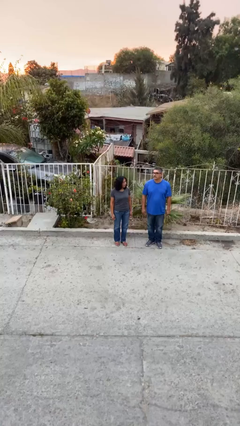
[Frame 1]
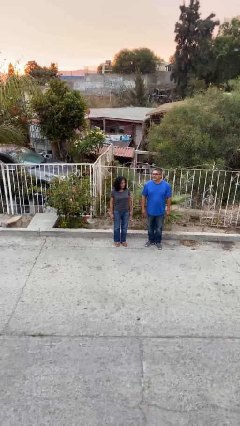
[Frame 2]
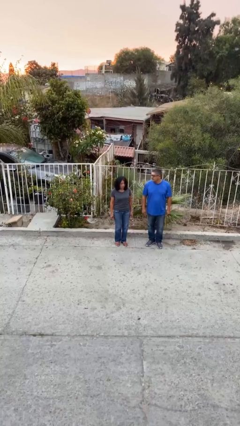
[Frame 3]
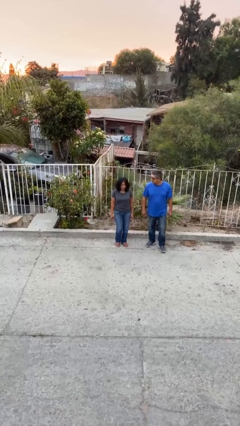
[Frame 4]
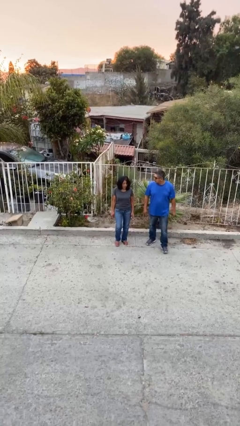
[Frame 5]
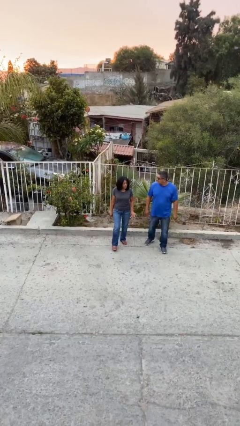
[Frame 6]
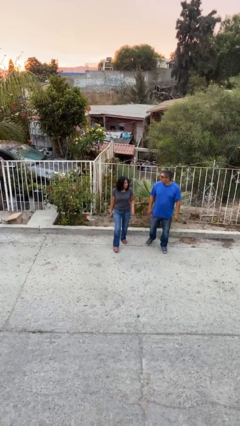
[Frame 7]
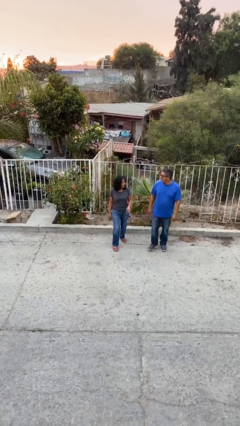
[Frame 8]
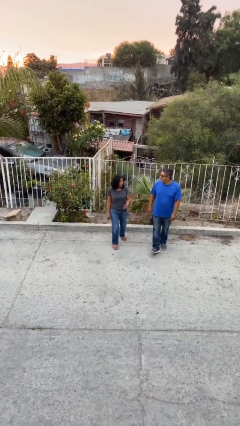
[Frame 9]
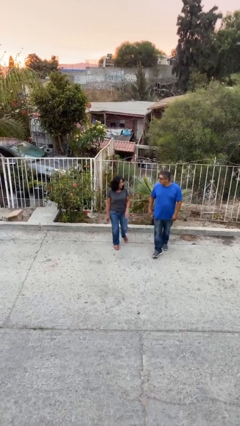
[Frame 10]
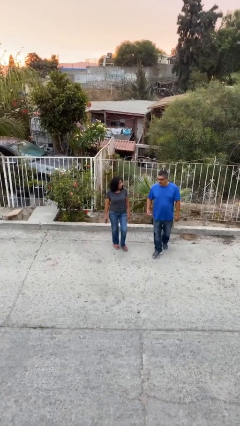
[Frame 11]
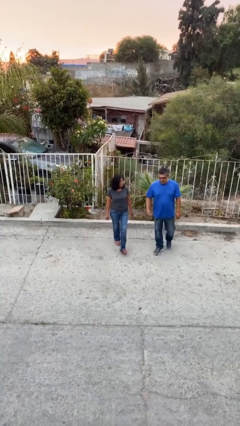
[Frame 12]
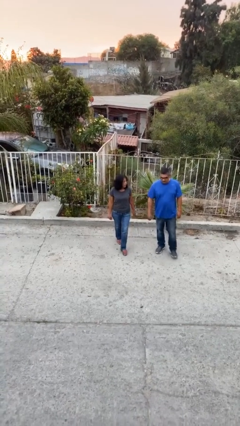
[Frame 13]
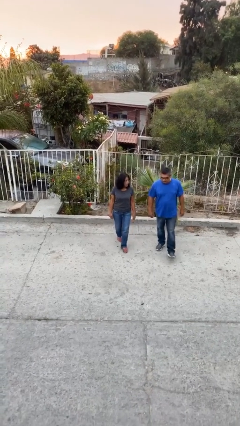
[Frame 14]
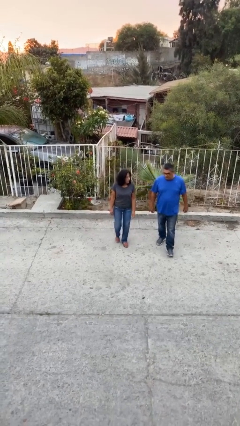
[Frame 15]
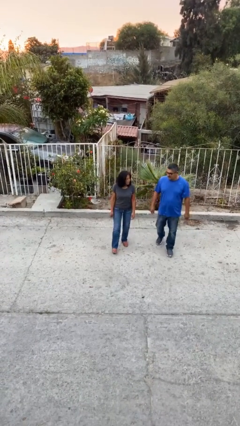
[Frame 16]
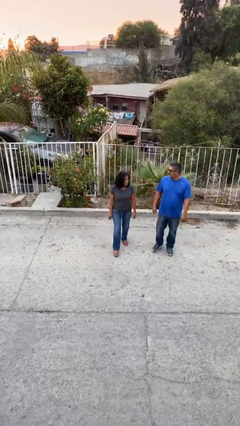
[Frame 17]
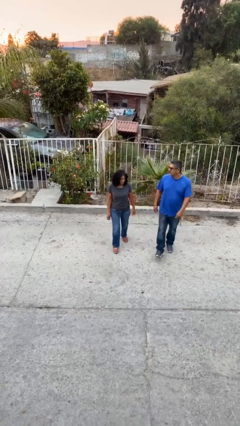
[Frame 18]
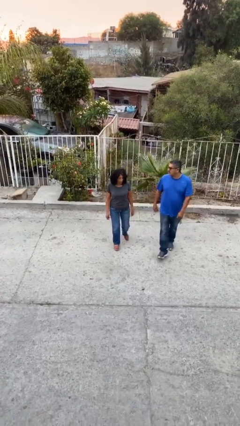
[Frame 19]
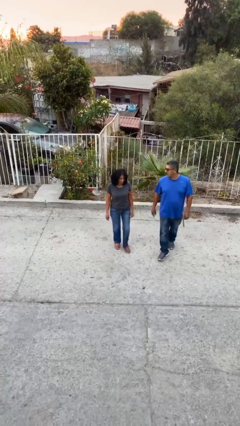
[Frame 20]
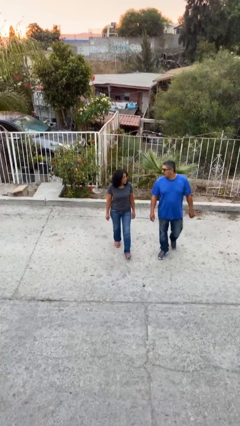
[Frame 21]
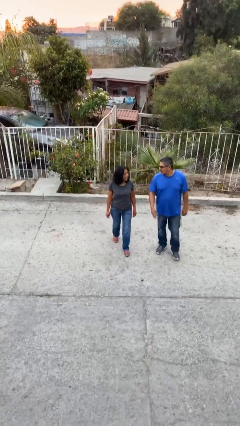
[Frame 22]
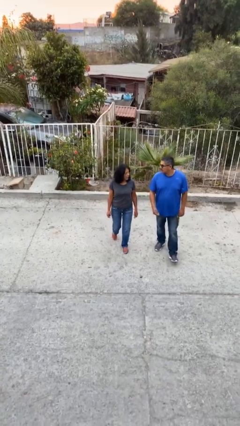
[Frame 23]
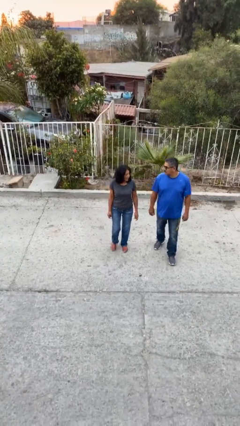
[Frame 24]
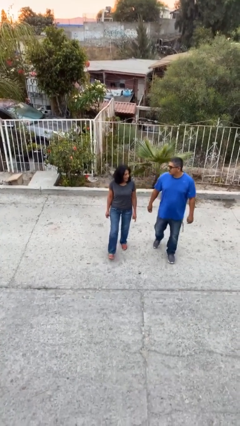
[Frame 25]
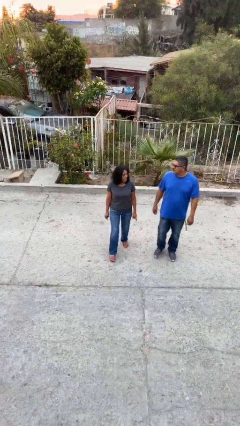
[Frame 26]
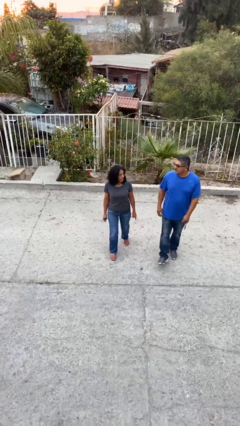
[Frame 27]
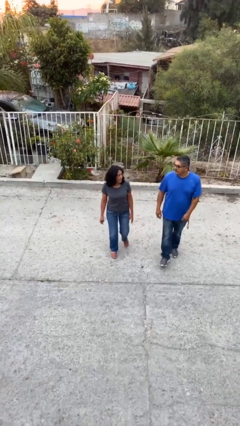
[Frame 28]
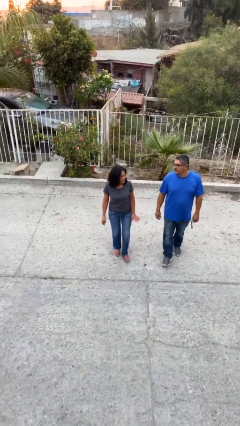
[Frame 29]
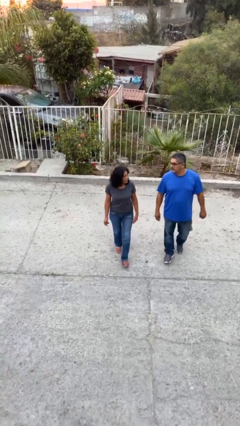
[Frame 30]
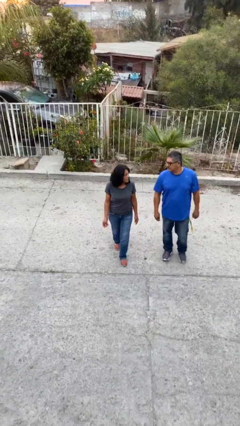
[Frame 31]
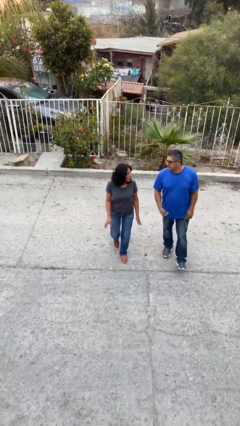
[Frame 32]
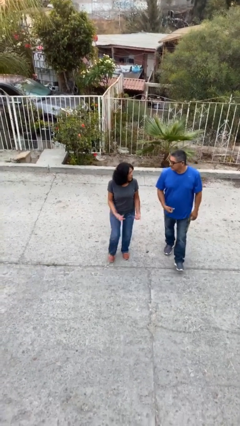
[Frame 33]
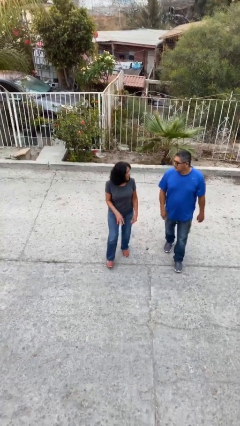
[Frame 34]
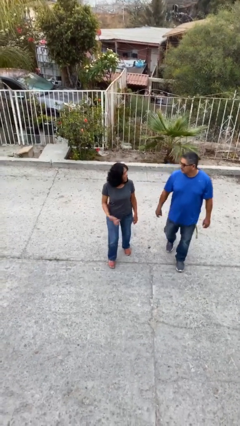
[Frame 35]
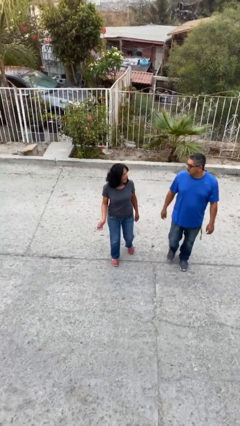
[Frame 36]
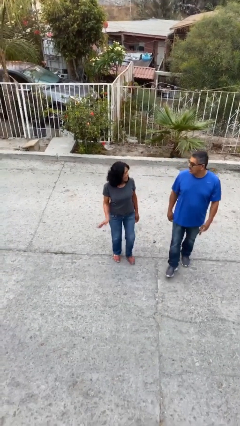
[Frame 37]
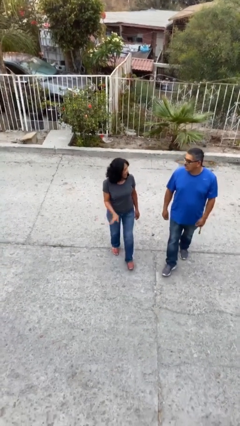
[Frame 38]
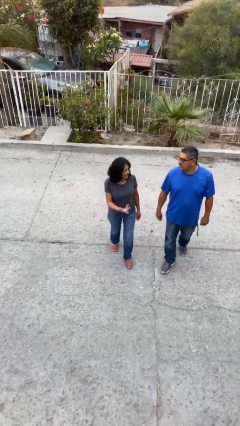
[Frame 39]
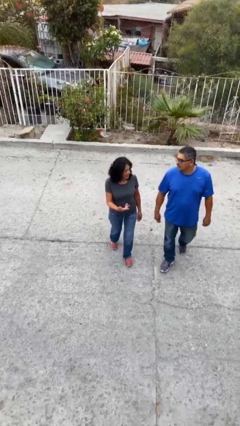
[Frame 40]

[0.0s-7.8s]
person talks to person

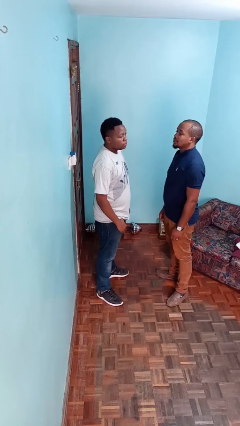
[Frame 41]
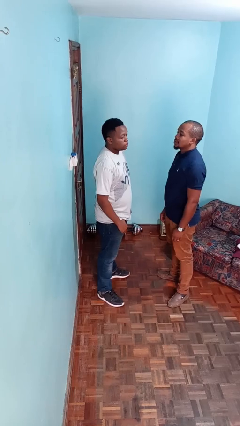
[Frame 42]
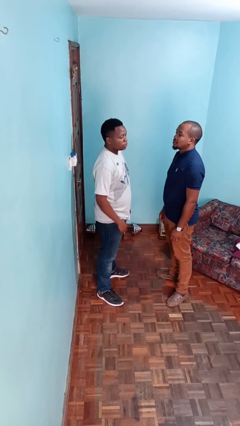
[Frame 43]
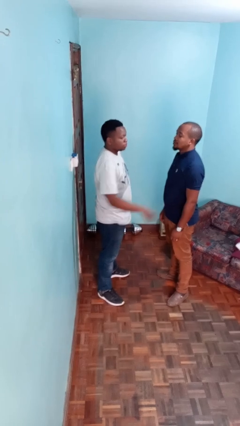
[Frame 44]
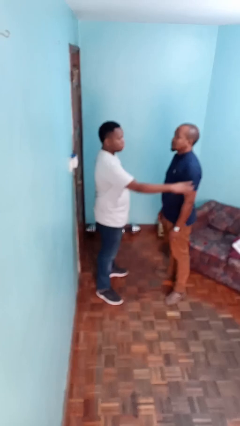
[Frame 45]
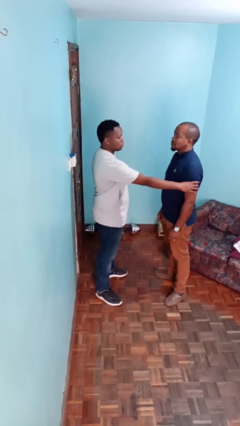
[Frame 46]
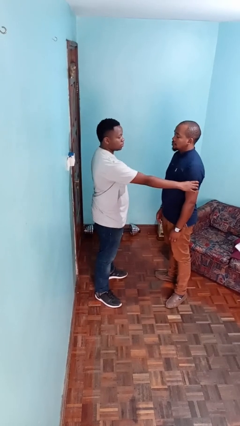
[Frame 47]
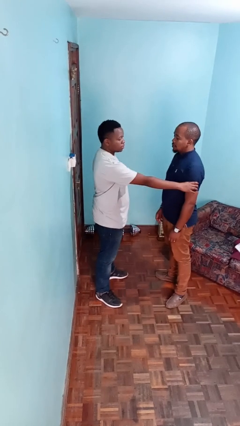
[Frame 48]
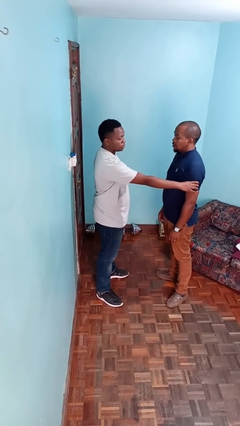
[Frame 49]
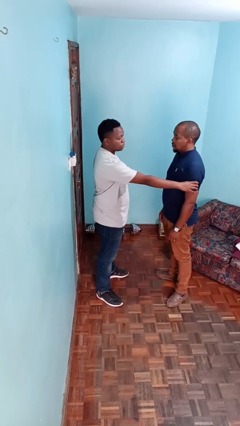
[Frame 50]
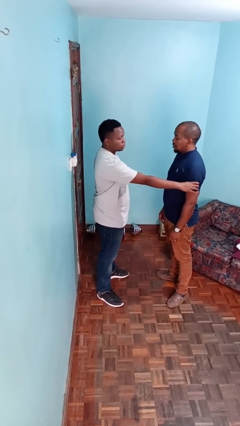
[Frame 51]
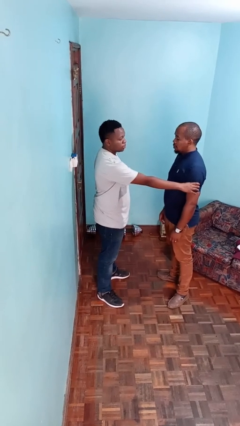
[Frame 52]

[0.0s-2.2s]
person grabs person by bicep

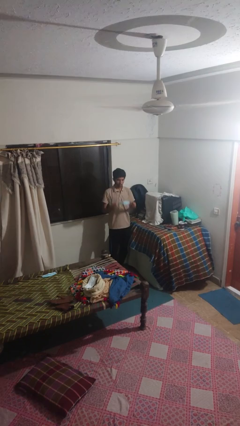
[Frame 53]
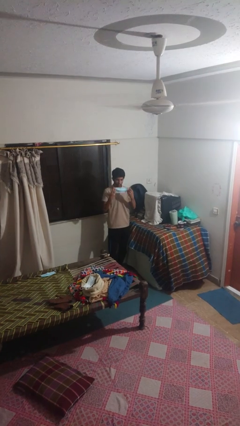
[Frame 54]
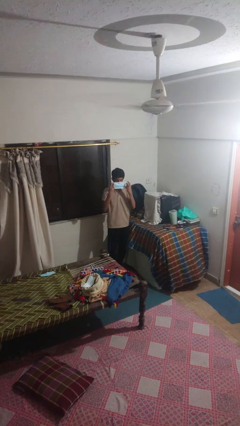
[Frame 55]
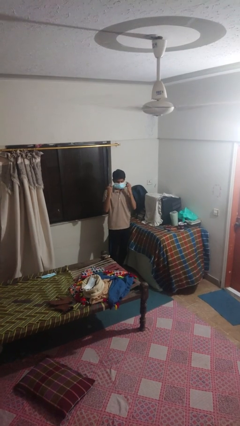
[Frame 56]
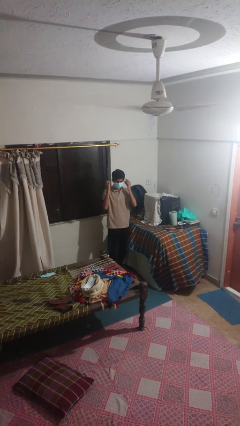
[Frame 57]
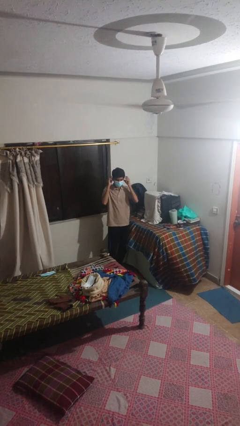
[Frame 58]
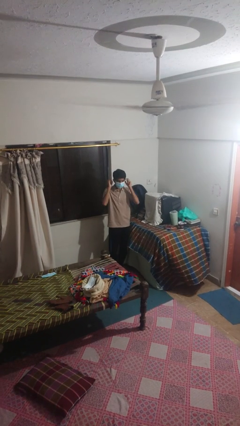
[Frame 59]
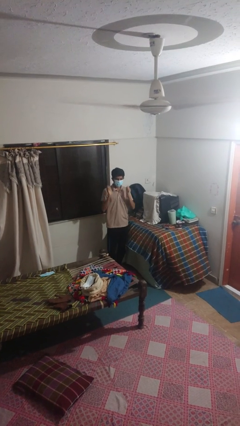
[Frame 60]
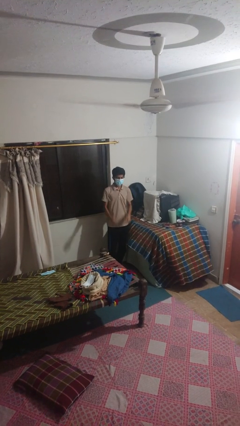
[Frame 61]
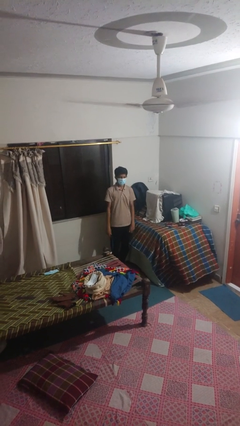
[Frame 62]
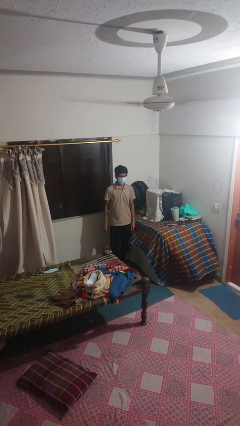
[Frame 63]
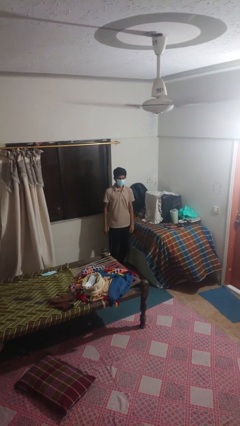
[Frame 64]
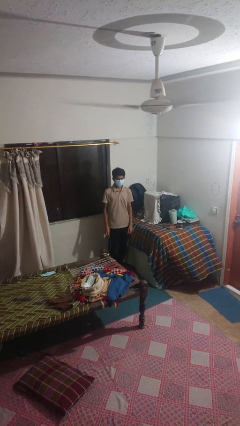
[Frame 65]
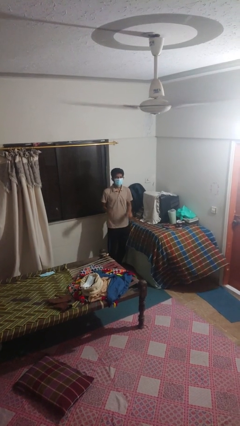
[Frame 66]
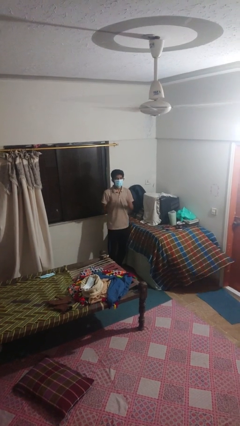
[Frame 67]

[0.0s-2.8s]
person puts on facemask

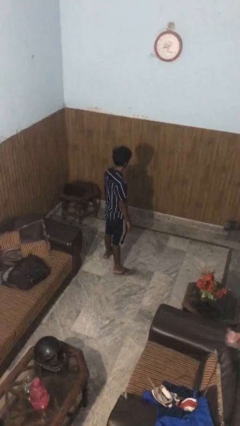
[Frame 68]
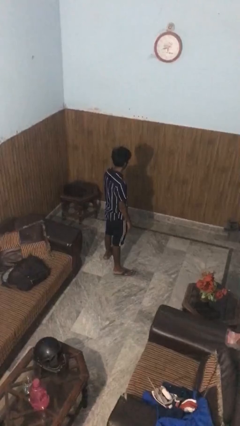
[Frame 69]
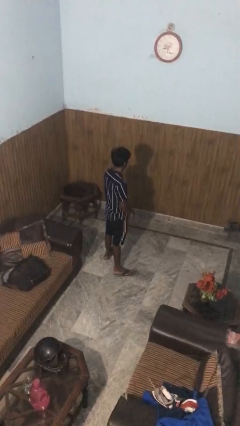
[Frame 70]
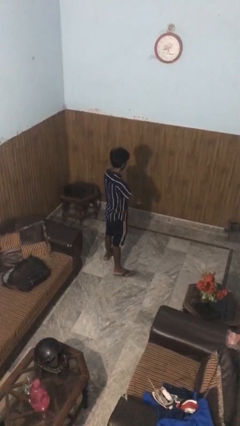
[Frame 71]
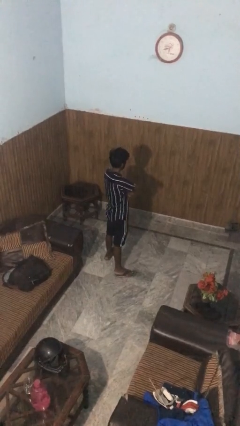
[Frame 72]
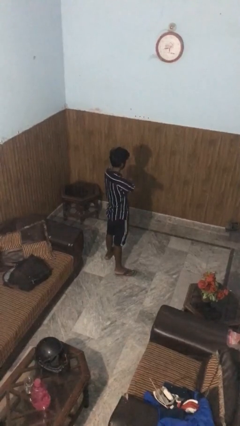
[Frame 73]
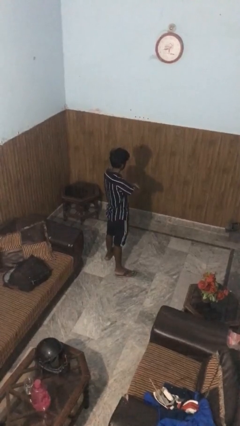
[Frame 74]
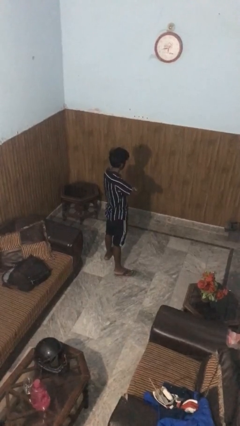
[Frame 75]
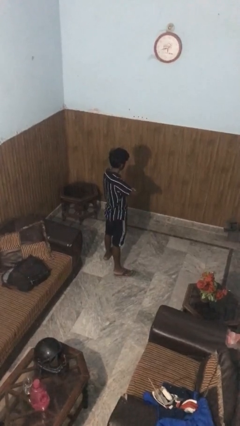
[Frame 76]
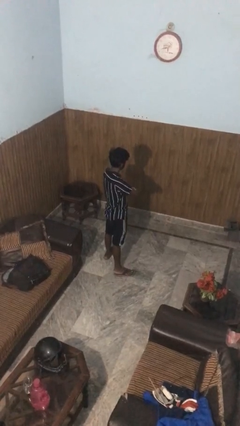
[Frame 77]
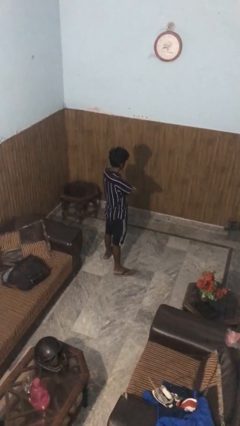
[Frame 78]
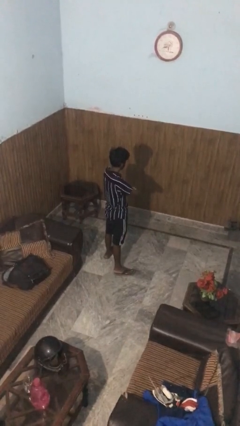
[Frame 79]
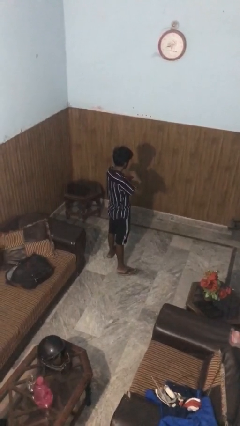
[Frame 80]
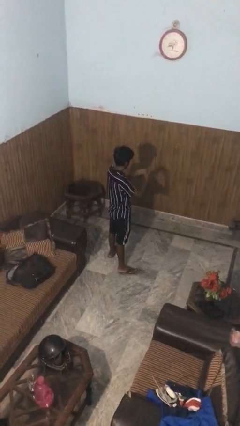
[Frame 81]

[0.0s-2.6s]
person crosses arms

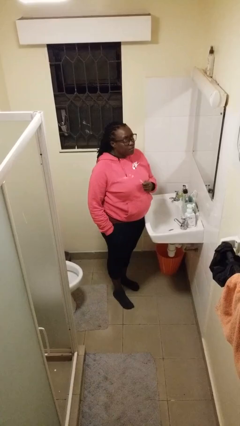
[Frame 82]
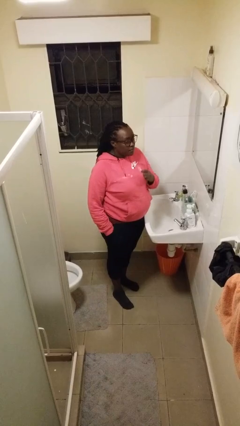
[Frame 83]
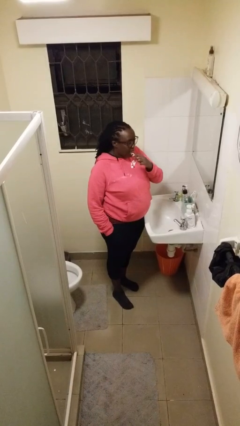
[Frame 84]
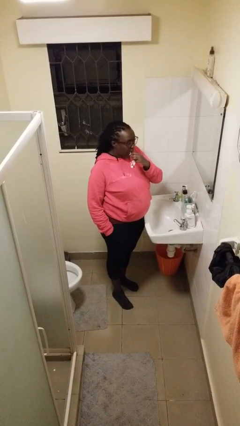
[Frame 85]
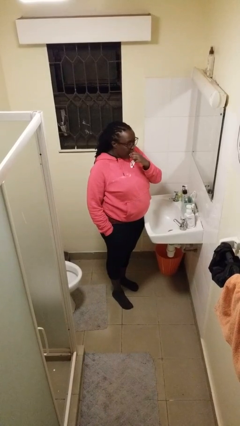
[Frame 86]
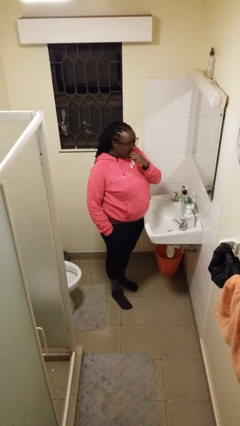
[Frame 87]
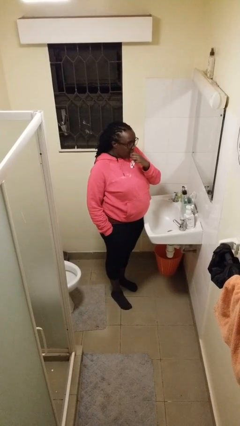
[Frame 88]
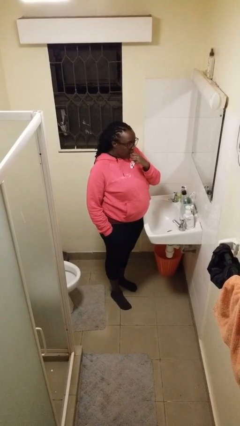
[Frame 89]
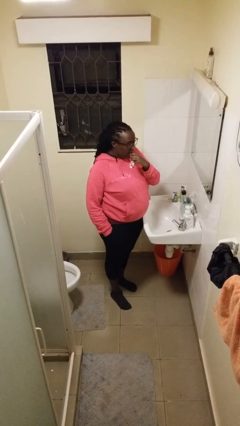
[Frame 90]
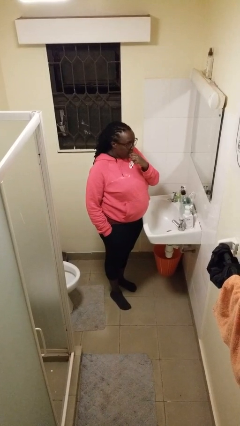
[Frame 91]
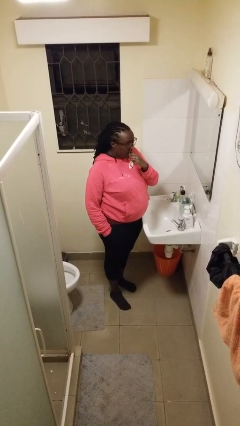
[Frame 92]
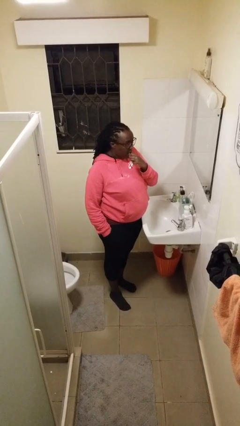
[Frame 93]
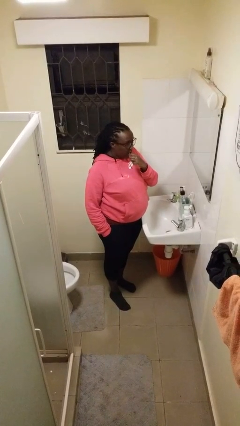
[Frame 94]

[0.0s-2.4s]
person flosses
